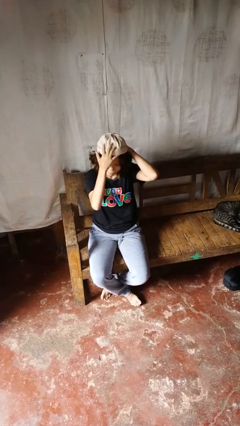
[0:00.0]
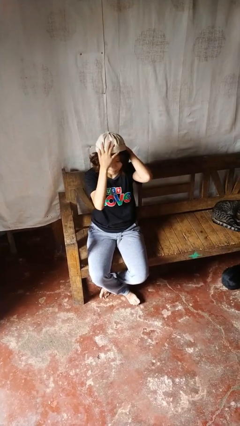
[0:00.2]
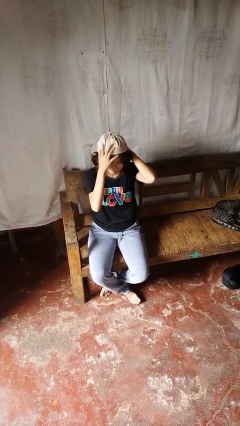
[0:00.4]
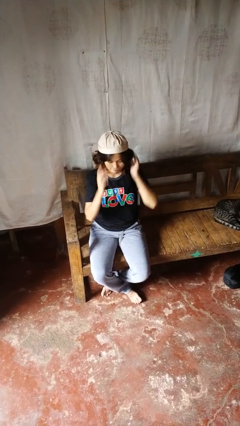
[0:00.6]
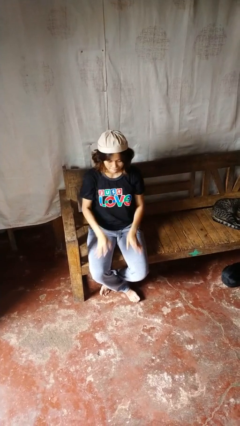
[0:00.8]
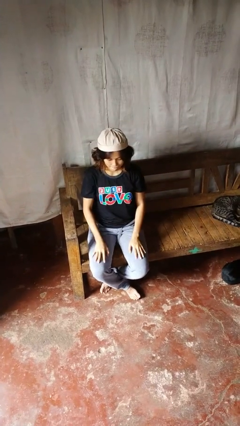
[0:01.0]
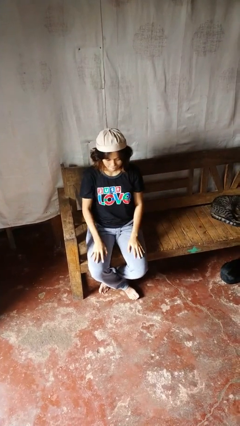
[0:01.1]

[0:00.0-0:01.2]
person puts on hat

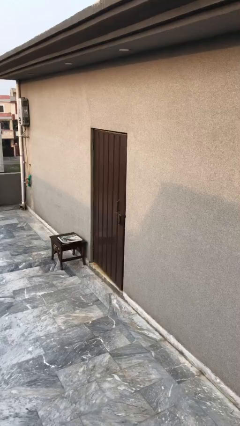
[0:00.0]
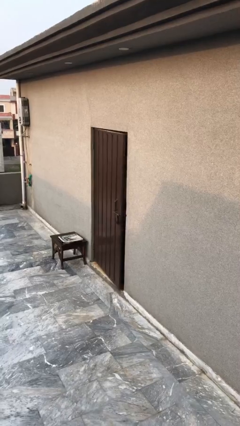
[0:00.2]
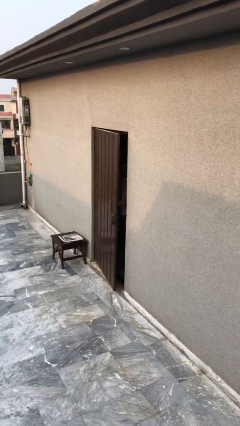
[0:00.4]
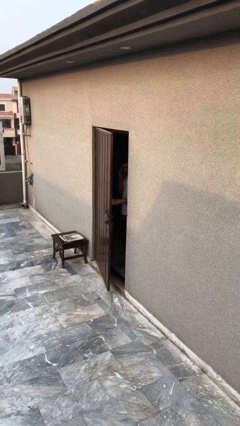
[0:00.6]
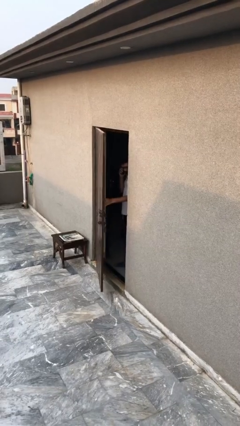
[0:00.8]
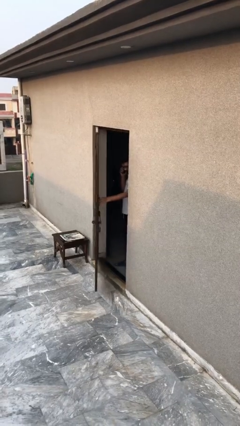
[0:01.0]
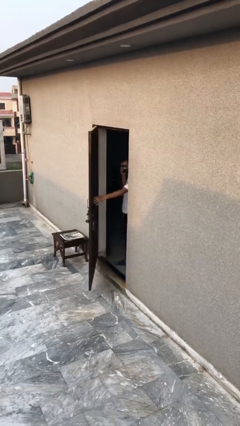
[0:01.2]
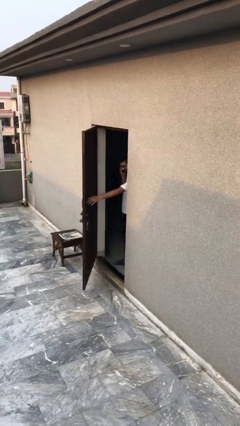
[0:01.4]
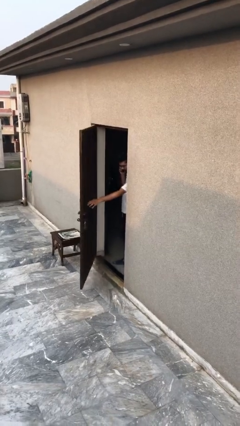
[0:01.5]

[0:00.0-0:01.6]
person opens facility door

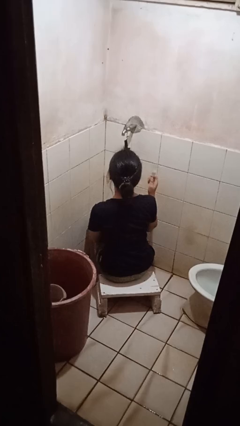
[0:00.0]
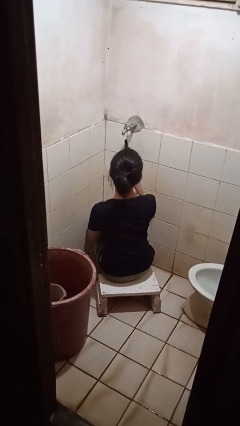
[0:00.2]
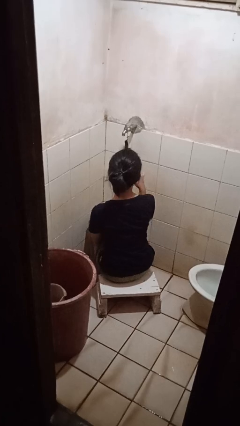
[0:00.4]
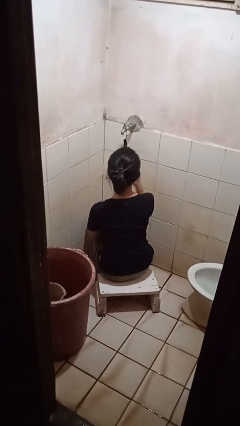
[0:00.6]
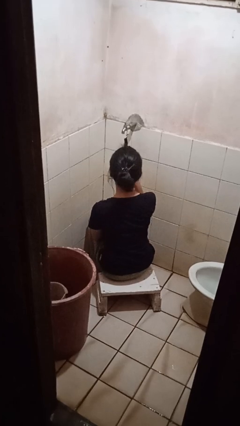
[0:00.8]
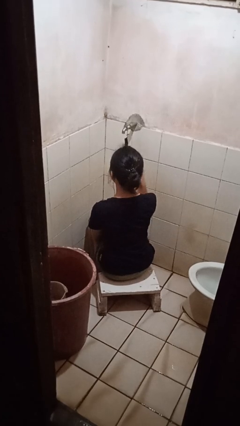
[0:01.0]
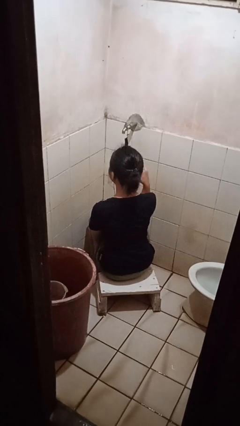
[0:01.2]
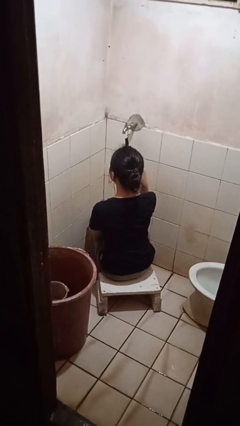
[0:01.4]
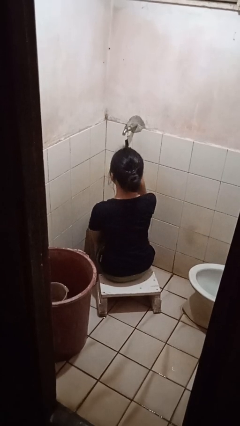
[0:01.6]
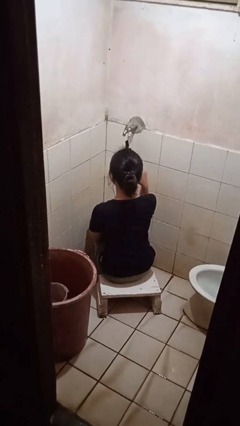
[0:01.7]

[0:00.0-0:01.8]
person brushes teeth

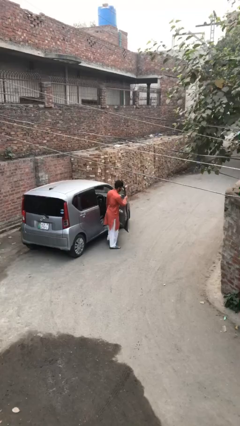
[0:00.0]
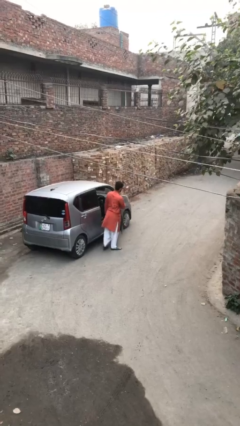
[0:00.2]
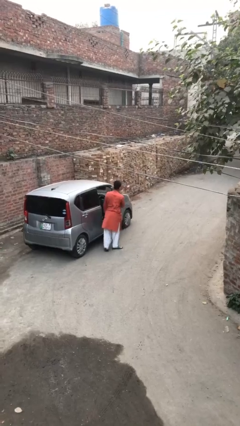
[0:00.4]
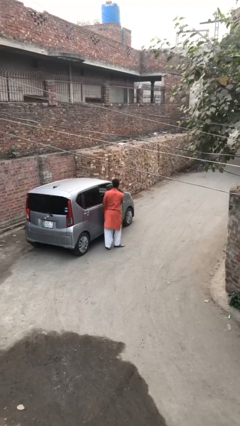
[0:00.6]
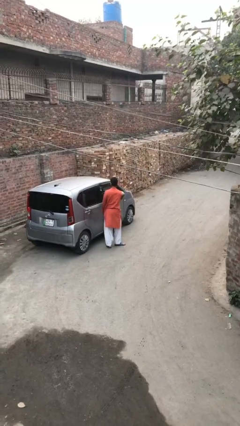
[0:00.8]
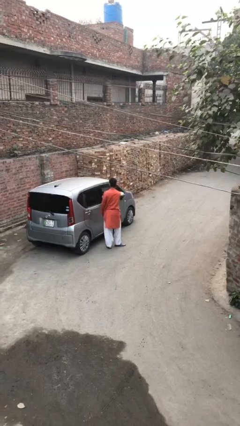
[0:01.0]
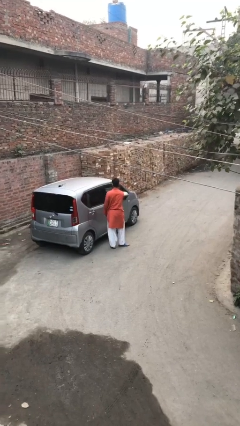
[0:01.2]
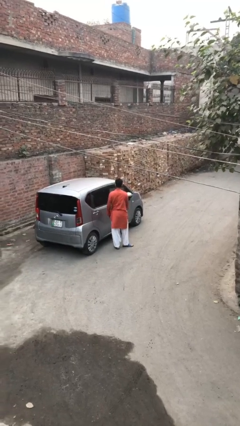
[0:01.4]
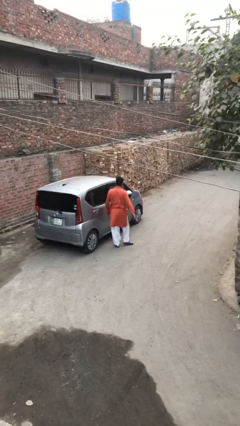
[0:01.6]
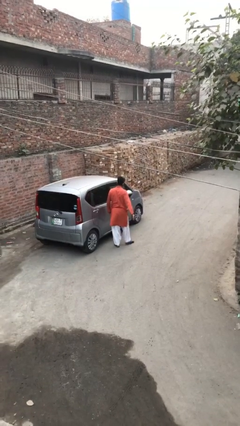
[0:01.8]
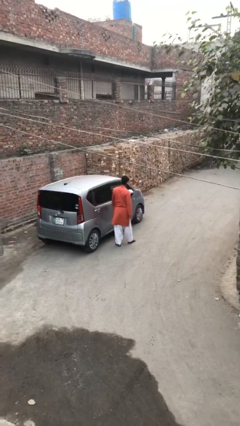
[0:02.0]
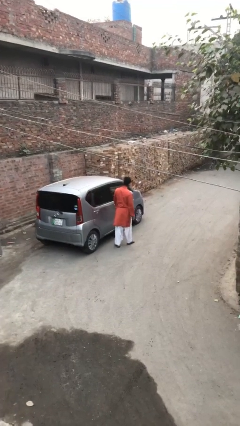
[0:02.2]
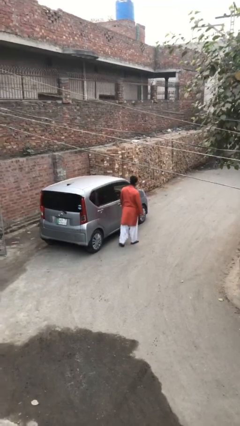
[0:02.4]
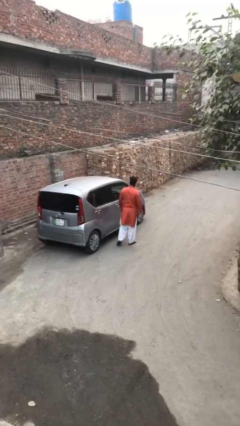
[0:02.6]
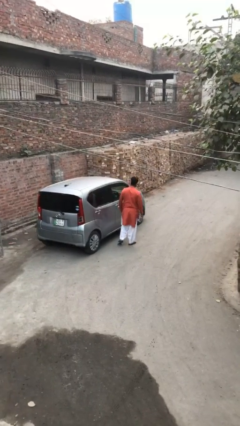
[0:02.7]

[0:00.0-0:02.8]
person closes car door

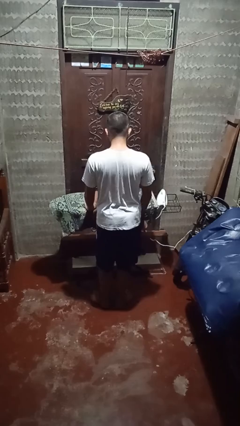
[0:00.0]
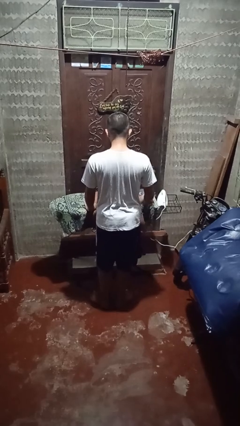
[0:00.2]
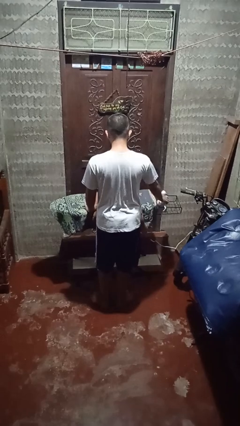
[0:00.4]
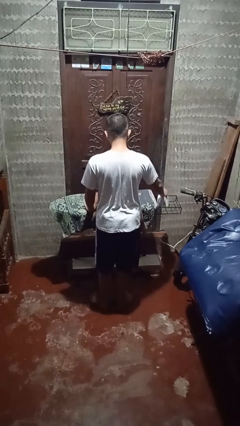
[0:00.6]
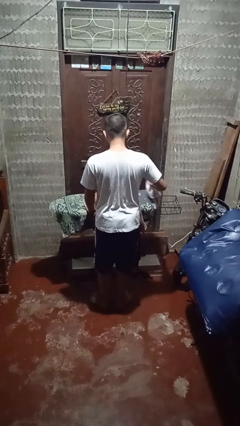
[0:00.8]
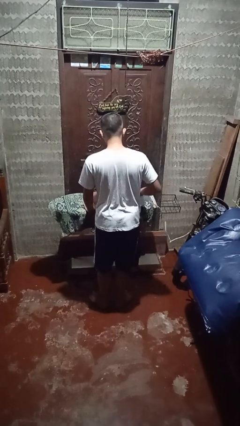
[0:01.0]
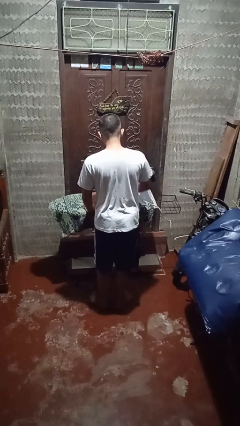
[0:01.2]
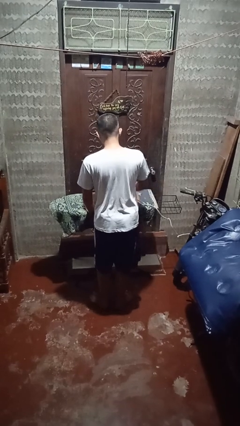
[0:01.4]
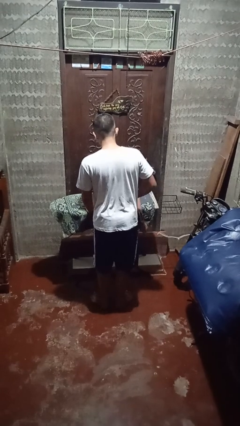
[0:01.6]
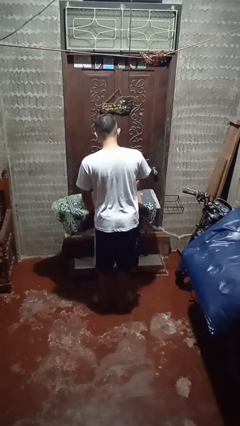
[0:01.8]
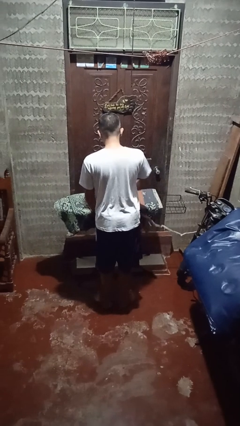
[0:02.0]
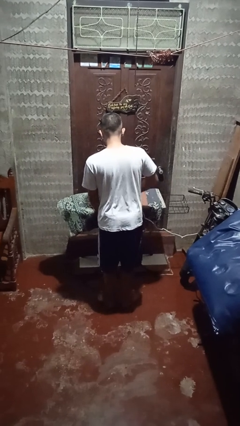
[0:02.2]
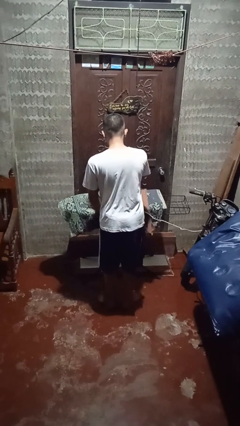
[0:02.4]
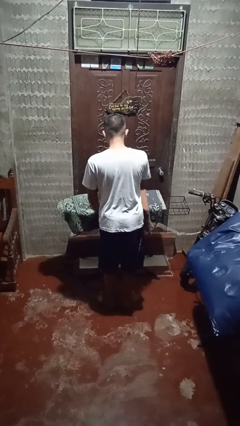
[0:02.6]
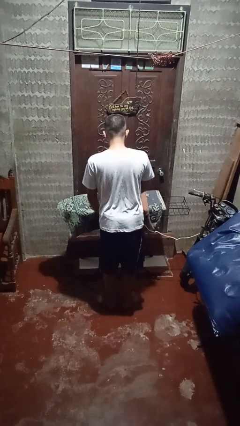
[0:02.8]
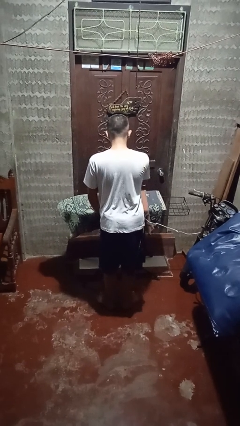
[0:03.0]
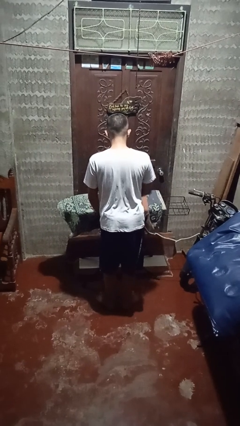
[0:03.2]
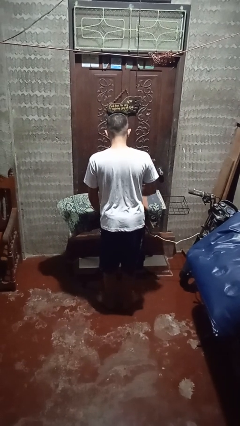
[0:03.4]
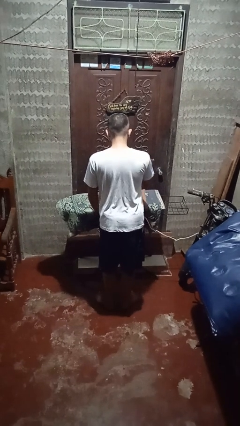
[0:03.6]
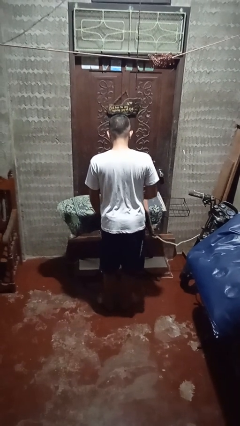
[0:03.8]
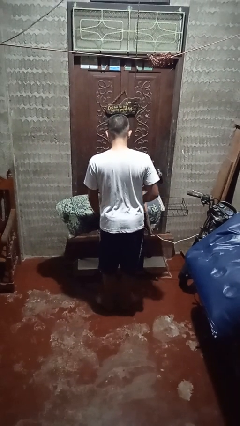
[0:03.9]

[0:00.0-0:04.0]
person irons clothes

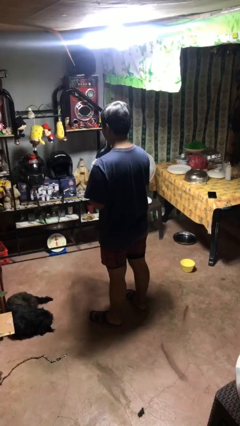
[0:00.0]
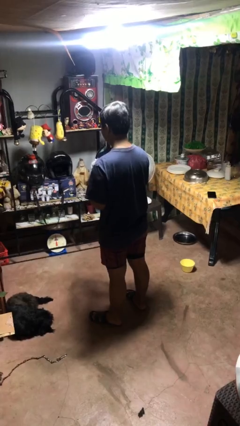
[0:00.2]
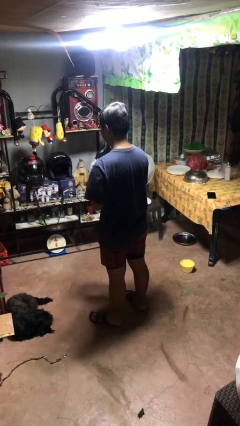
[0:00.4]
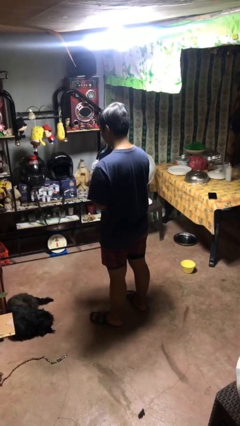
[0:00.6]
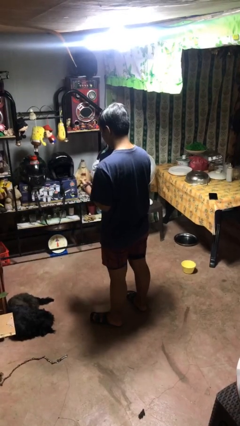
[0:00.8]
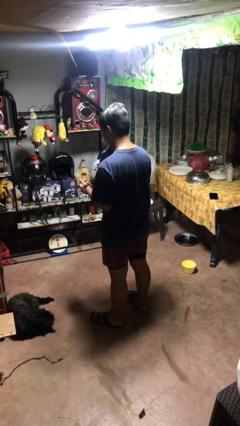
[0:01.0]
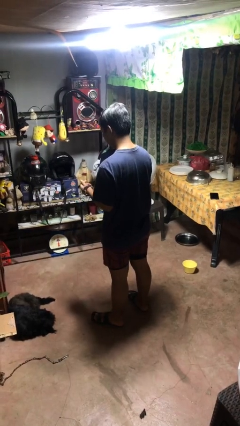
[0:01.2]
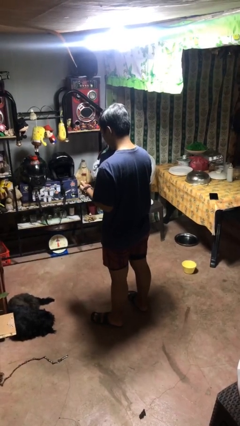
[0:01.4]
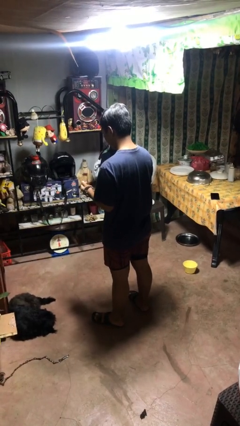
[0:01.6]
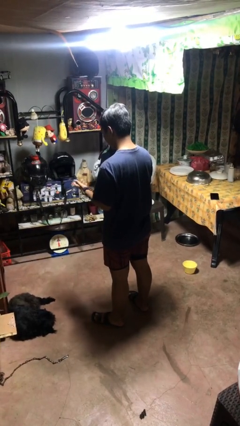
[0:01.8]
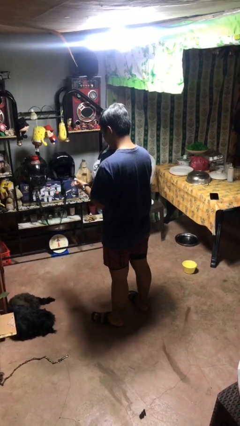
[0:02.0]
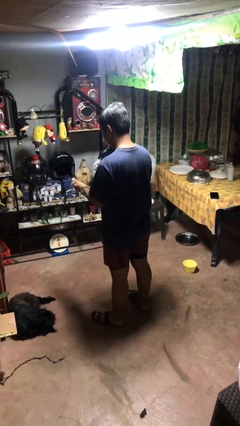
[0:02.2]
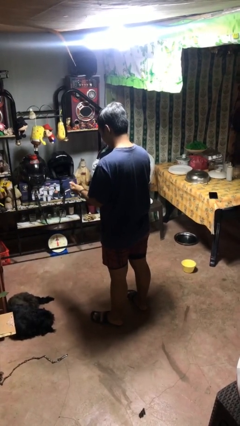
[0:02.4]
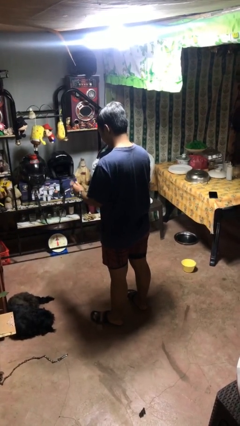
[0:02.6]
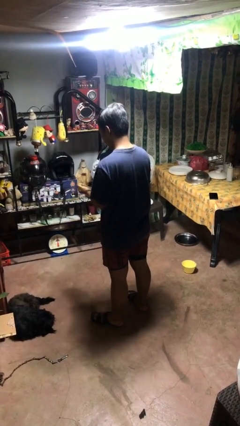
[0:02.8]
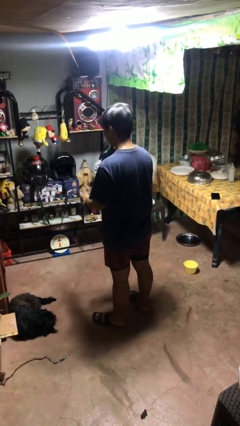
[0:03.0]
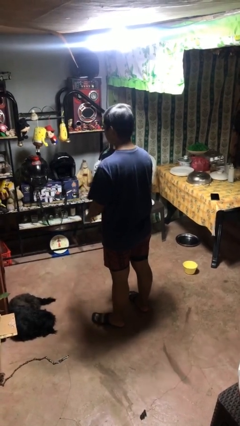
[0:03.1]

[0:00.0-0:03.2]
person puts on wristwatch

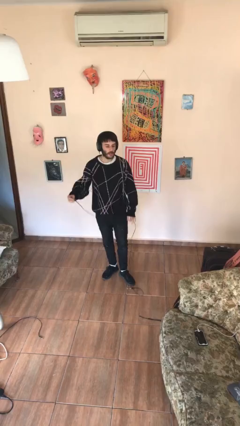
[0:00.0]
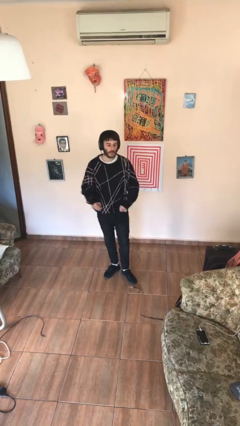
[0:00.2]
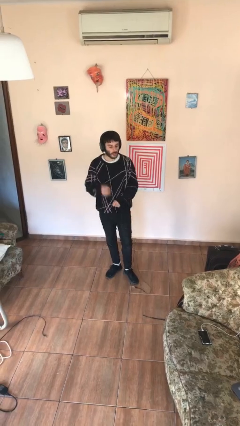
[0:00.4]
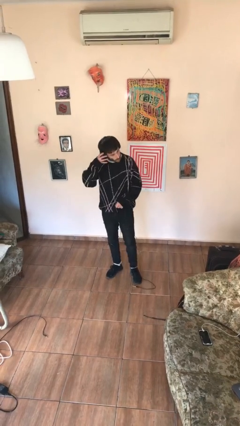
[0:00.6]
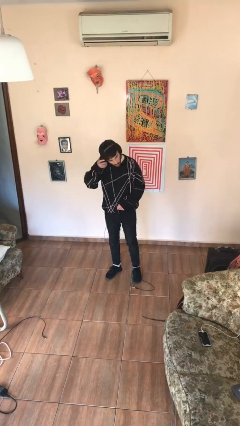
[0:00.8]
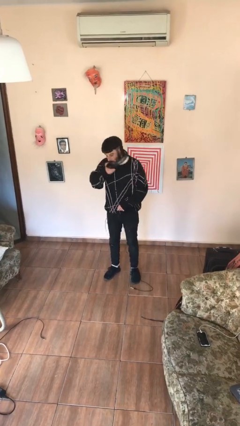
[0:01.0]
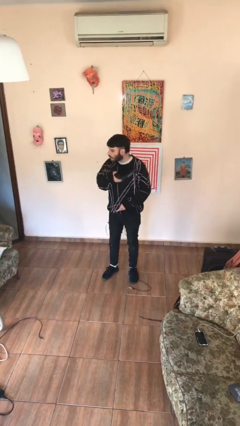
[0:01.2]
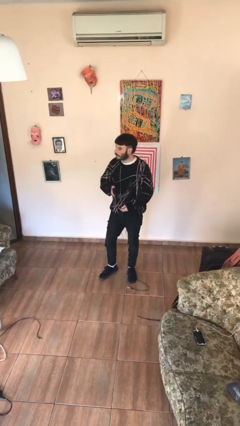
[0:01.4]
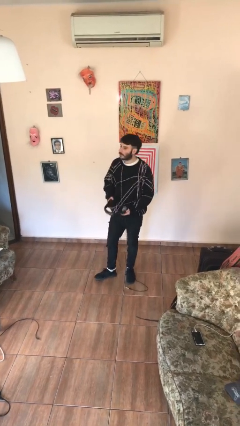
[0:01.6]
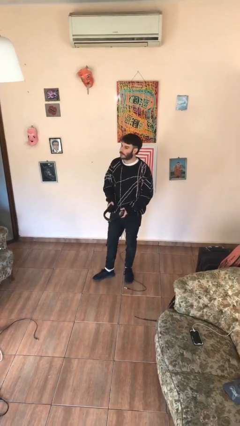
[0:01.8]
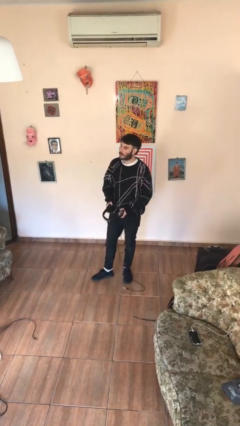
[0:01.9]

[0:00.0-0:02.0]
person takes off headphones

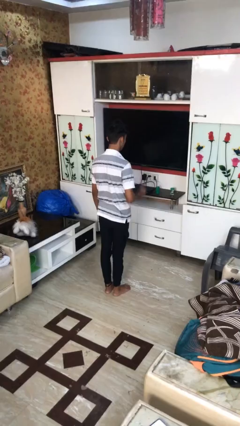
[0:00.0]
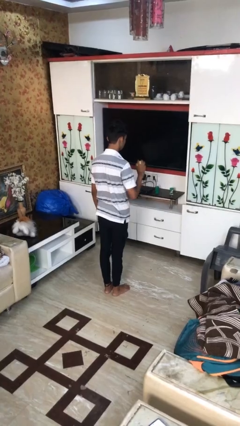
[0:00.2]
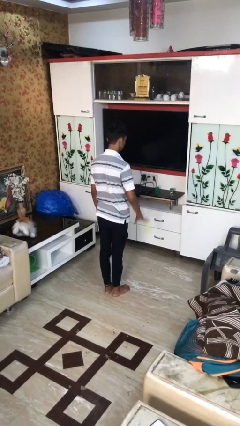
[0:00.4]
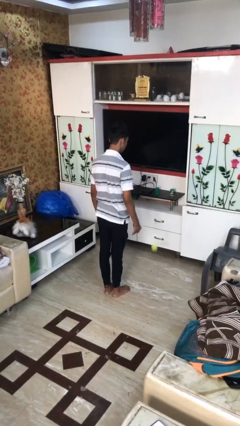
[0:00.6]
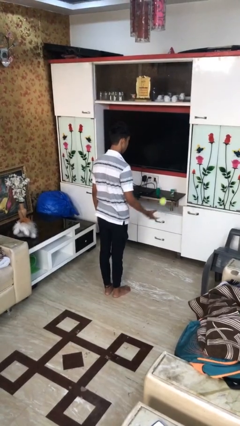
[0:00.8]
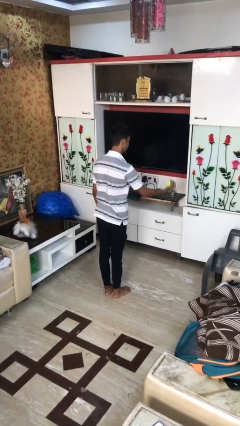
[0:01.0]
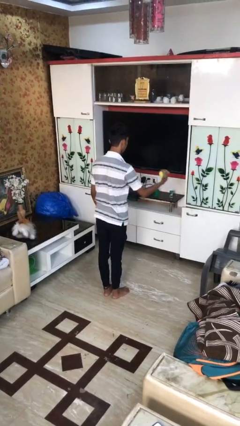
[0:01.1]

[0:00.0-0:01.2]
person bounces ball on floor
